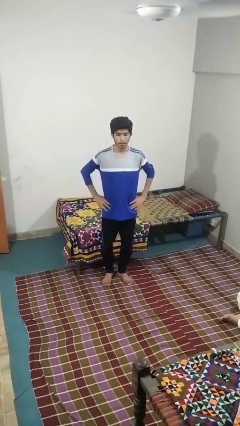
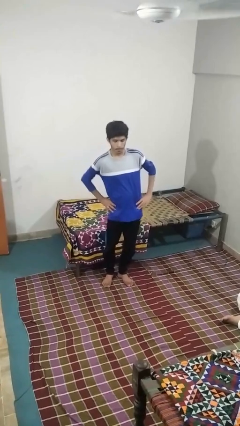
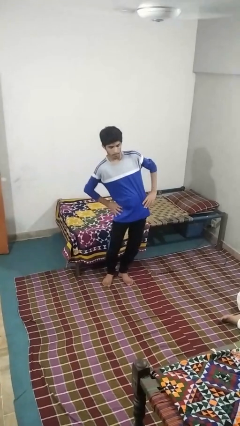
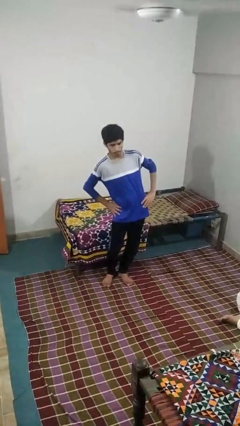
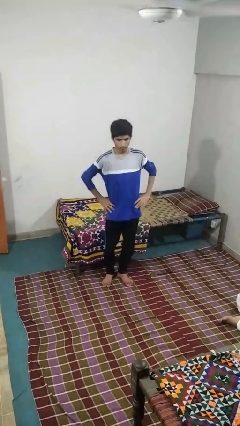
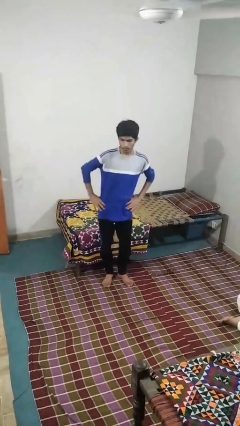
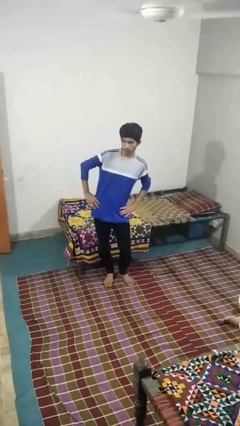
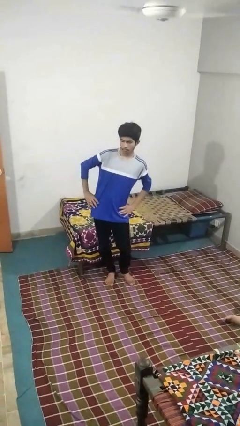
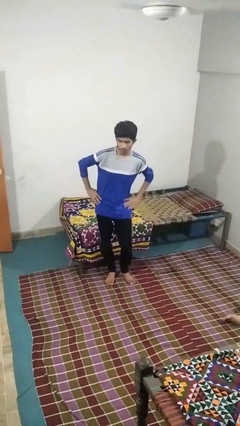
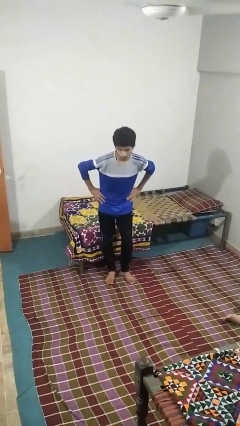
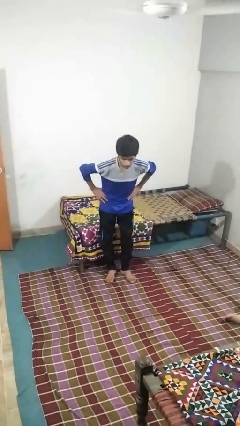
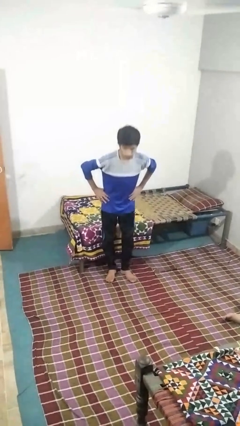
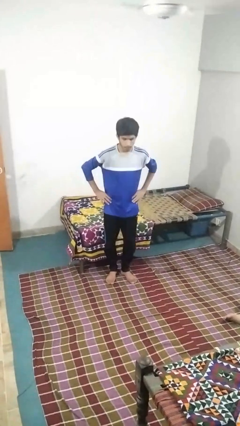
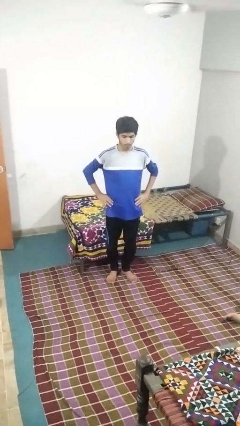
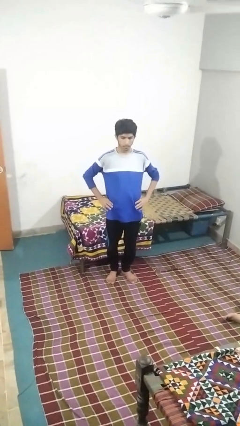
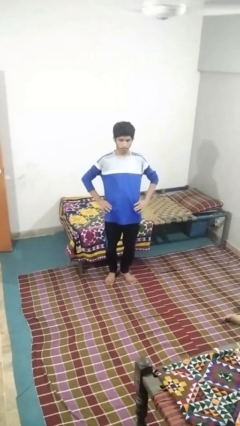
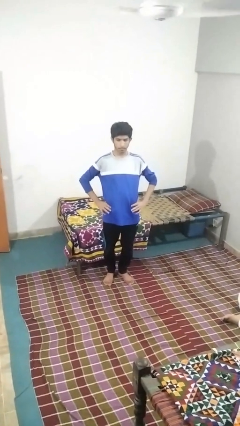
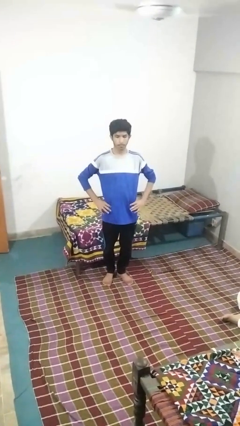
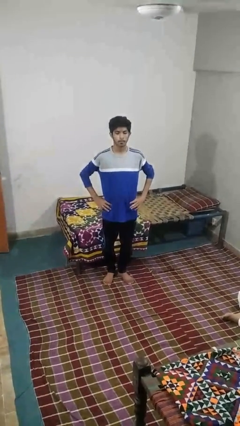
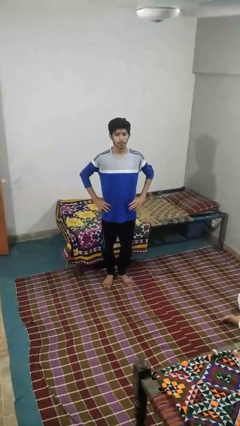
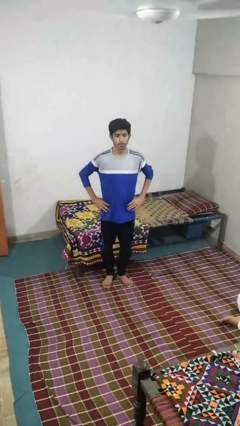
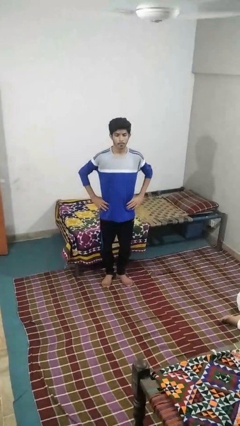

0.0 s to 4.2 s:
person wiggles hips

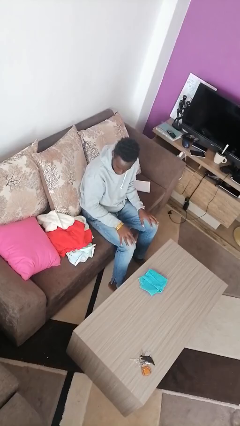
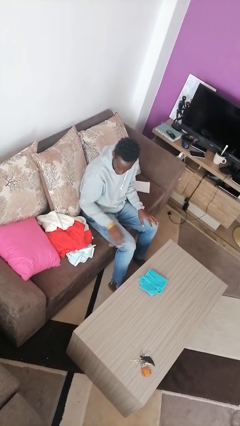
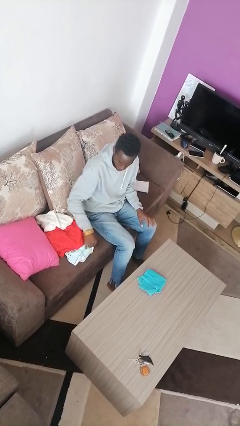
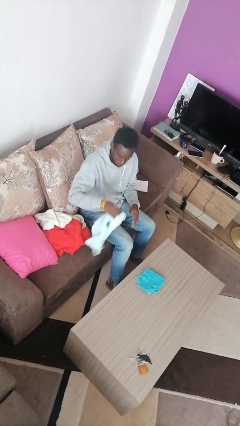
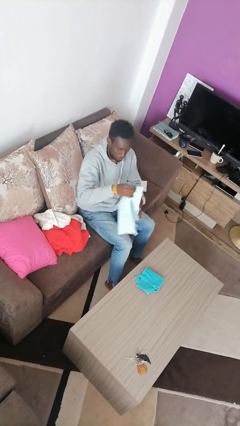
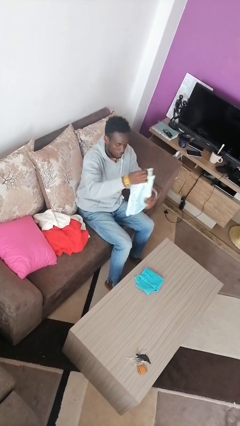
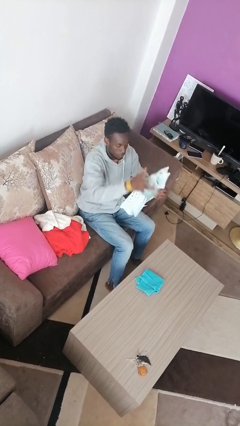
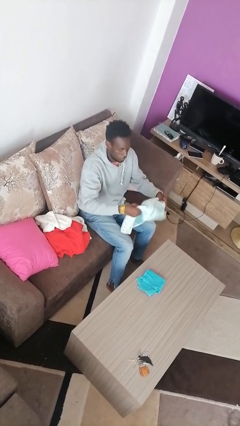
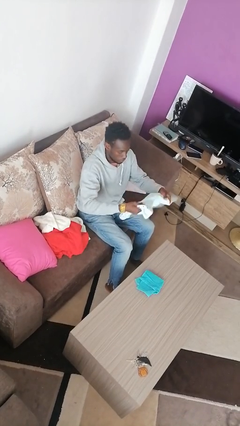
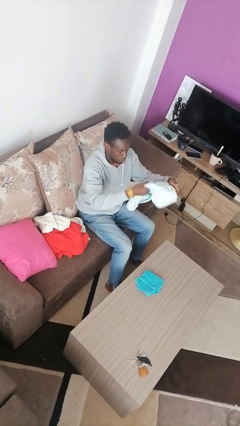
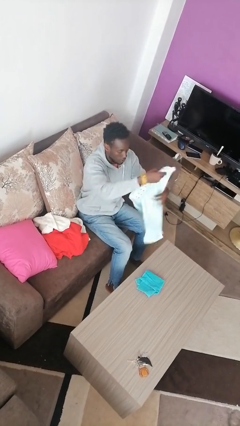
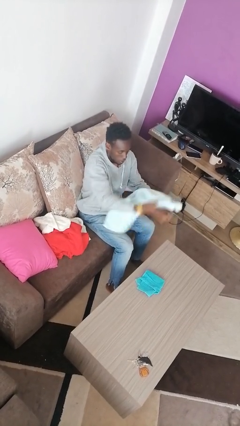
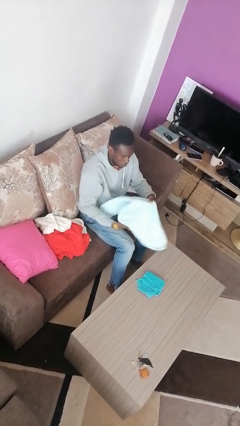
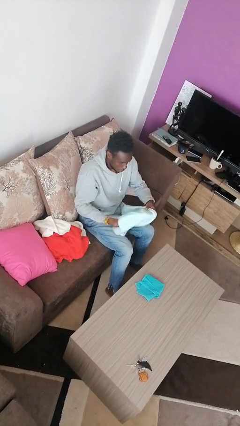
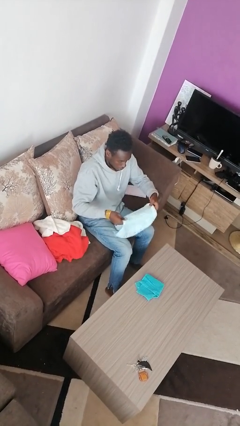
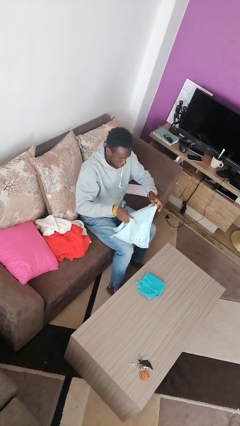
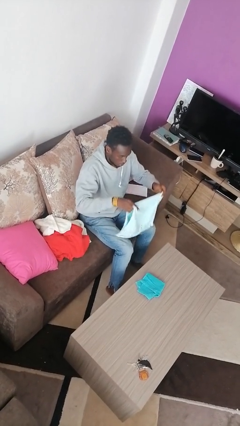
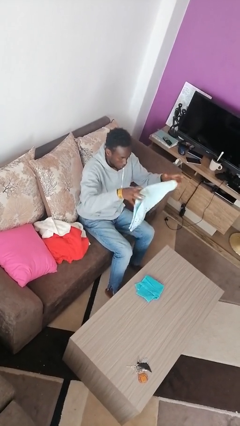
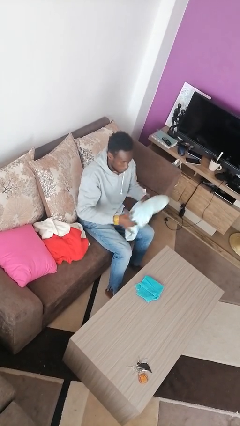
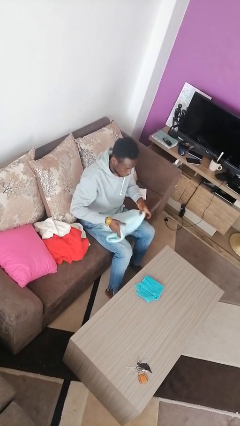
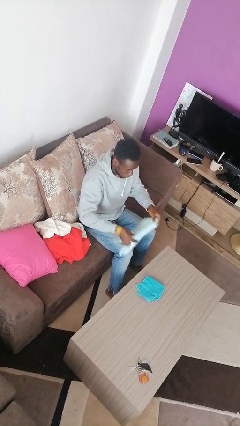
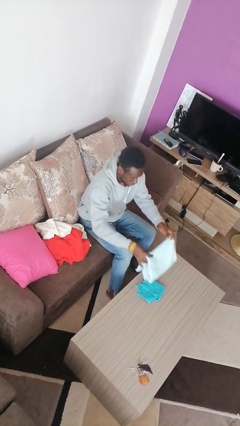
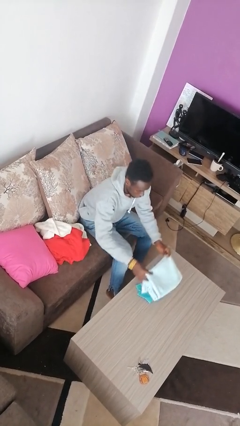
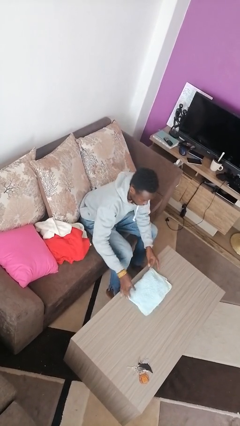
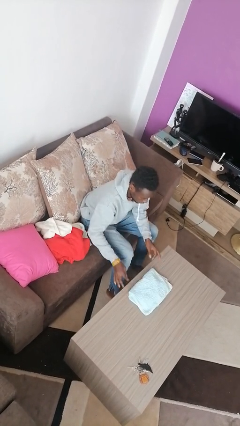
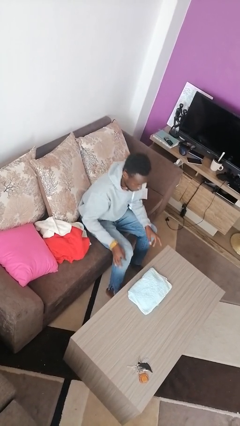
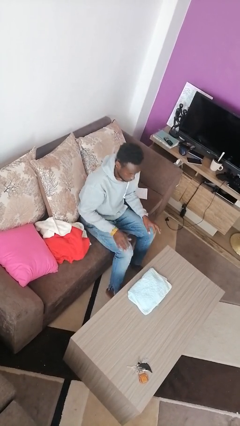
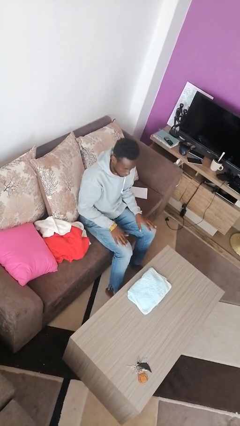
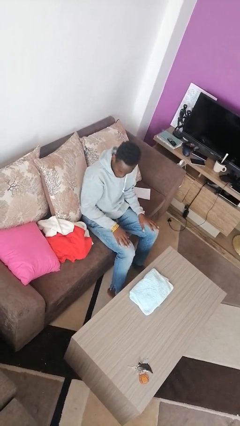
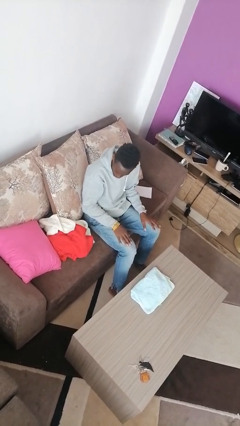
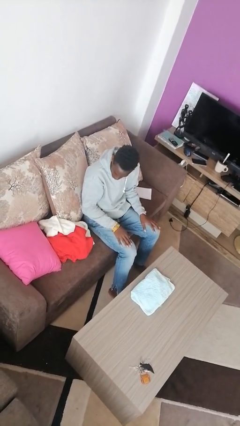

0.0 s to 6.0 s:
person folds towel

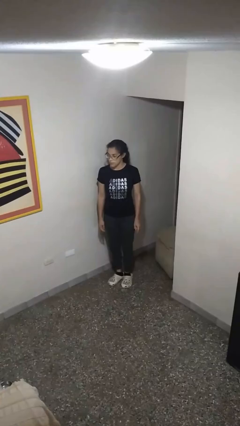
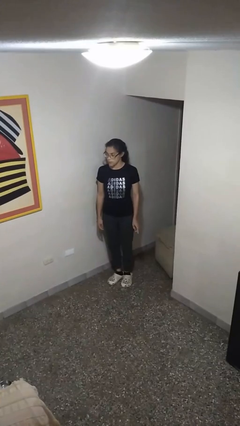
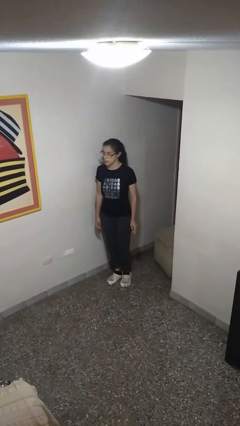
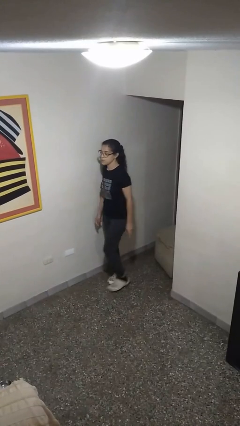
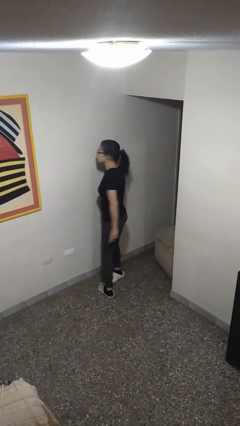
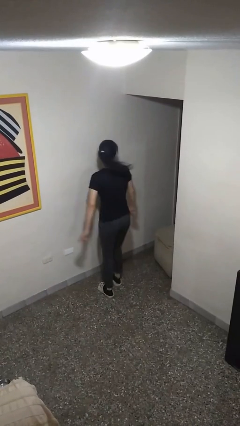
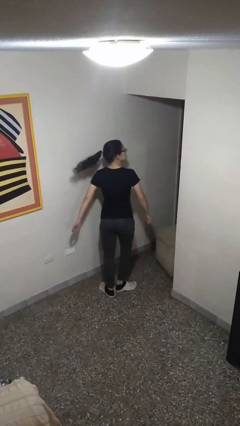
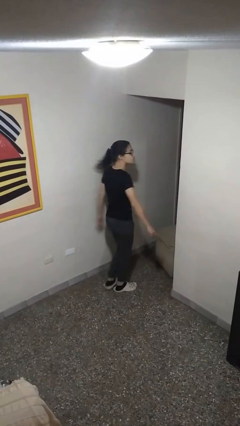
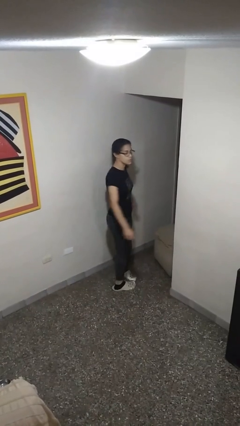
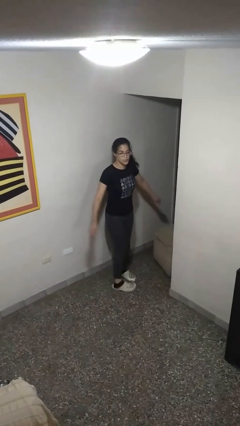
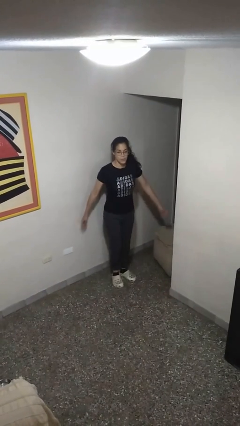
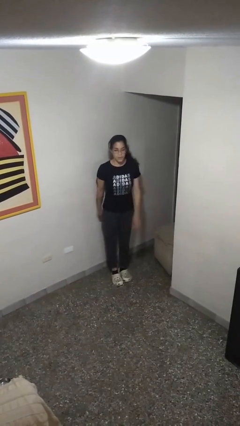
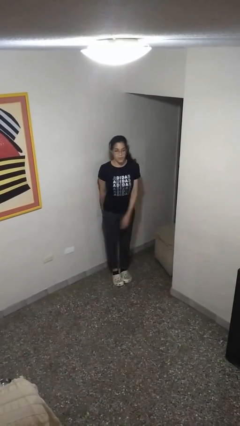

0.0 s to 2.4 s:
person twirls

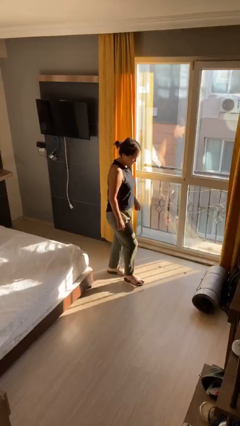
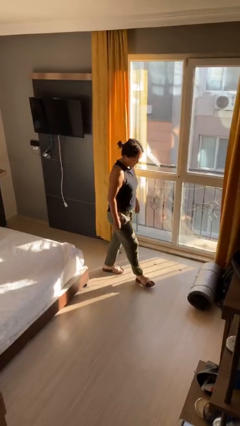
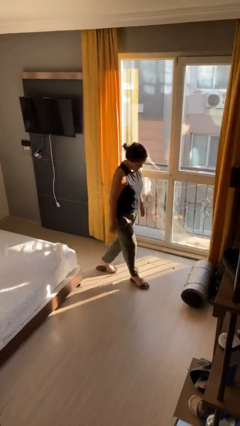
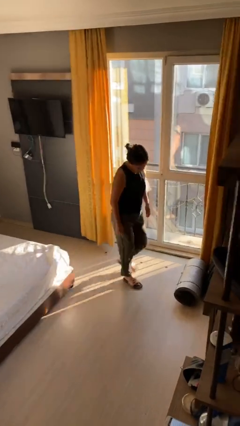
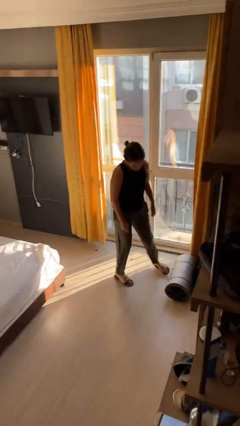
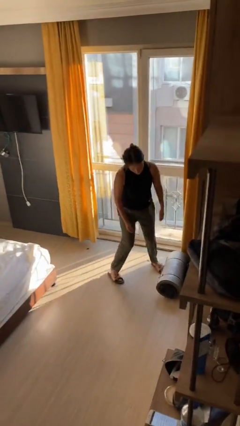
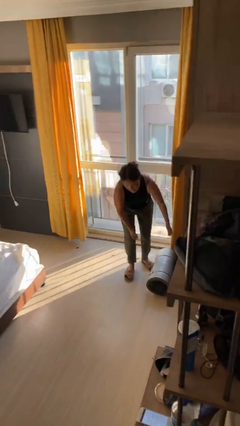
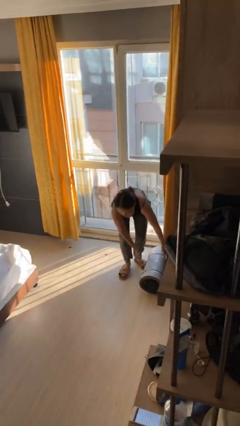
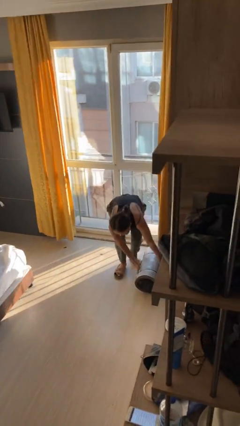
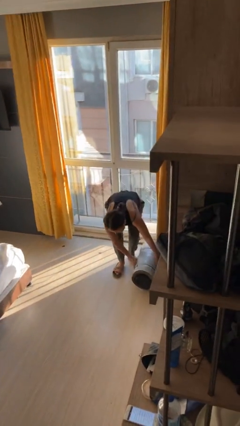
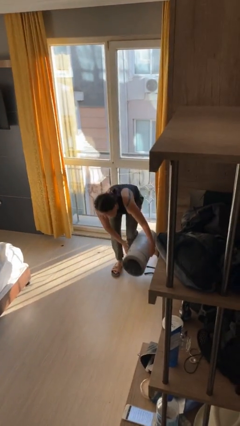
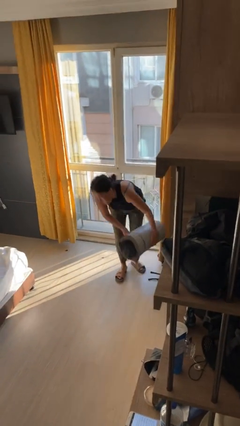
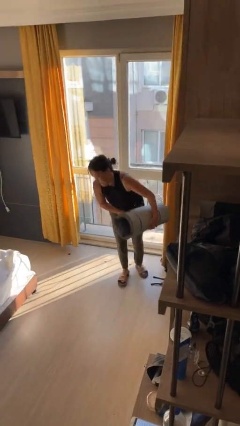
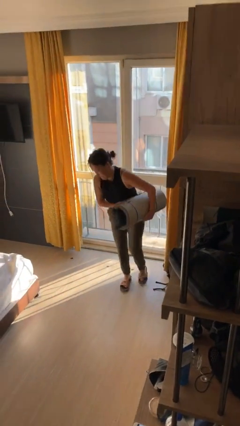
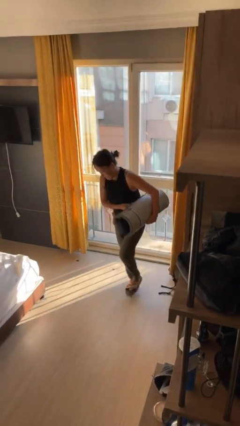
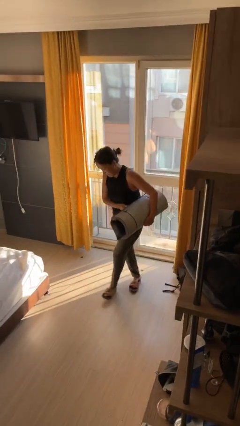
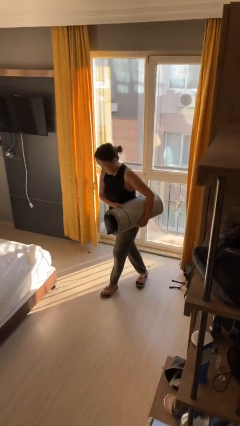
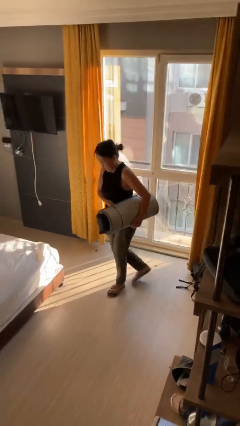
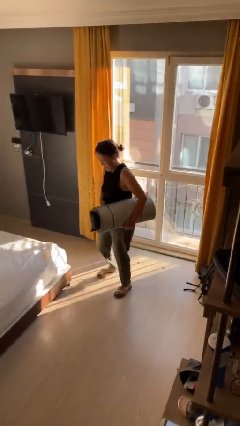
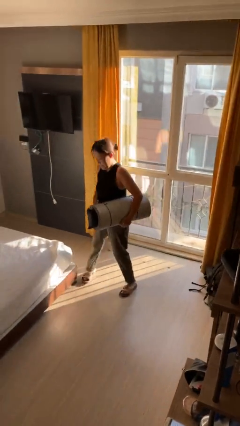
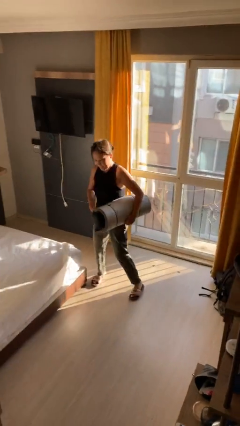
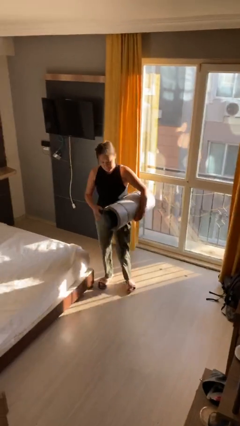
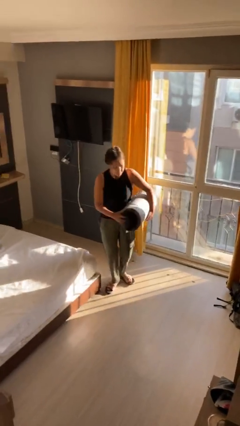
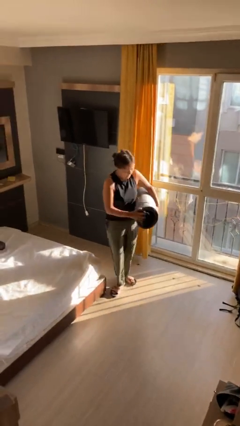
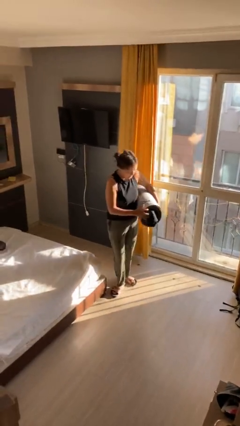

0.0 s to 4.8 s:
person picks up object from floor

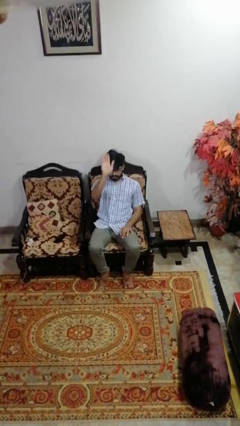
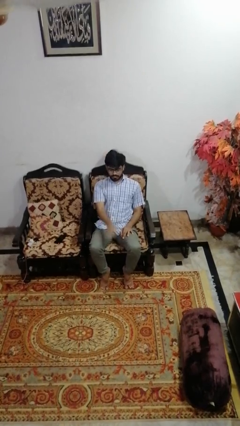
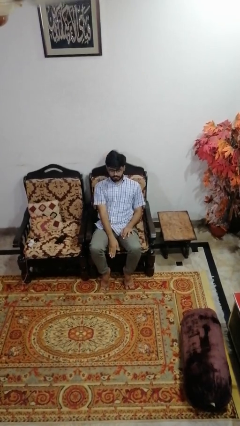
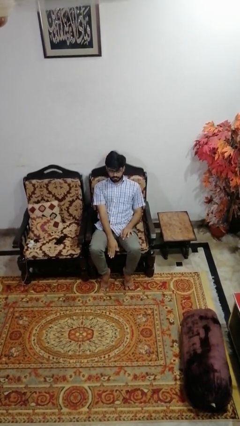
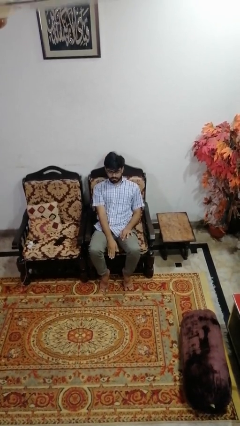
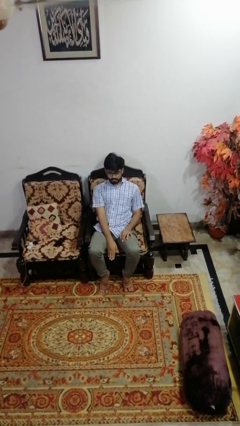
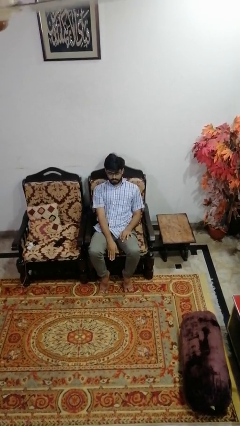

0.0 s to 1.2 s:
person gestures swipe down
